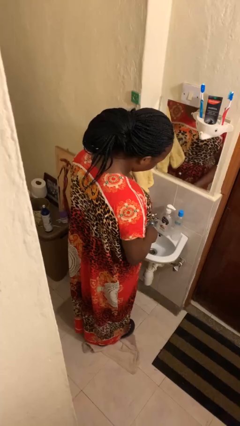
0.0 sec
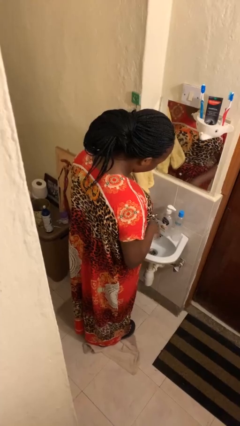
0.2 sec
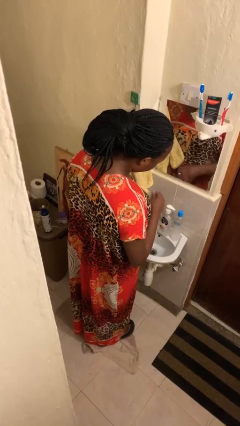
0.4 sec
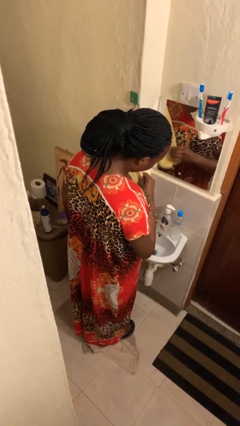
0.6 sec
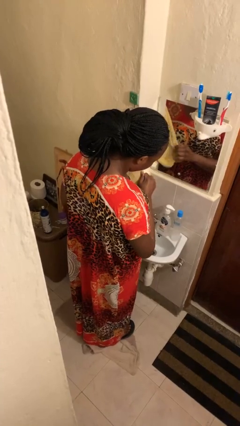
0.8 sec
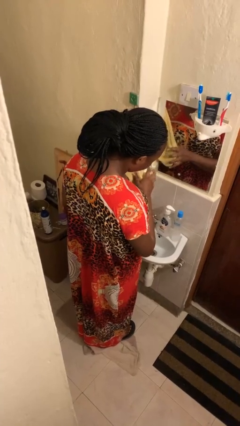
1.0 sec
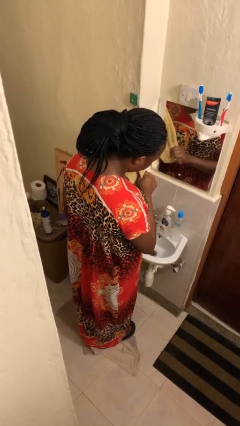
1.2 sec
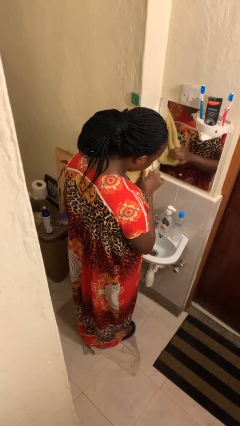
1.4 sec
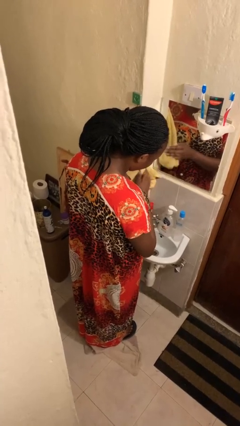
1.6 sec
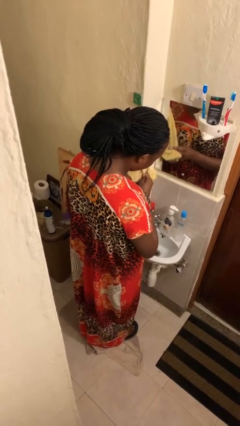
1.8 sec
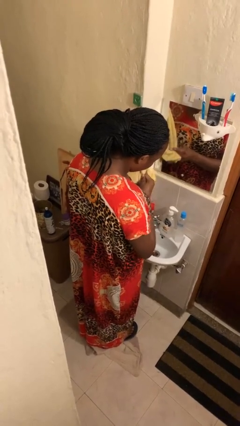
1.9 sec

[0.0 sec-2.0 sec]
person dries hands with towel

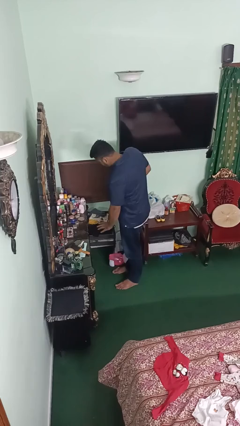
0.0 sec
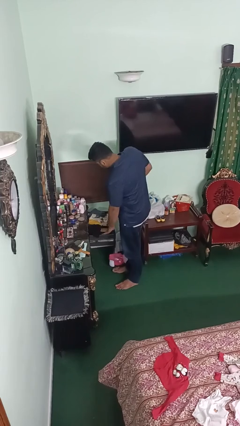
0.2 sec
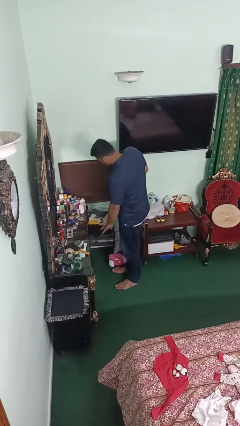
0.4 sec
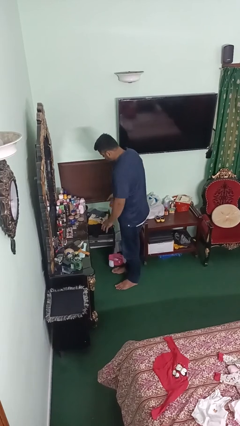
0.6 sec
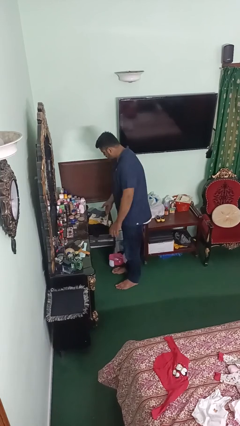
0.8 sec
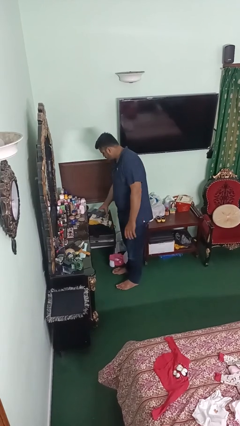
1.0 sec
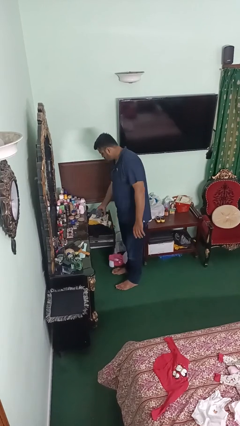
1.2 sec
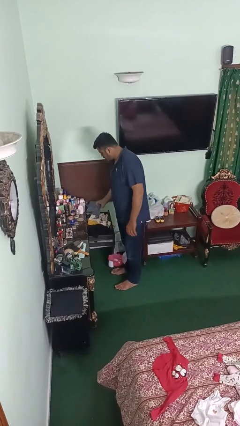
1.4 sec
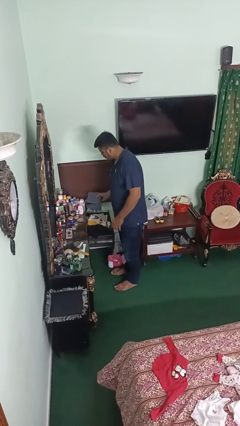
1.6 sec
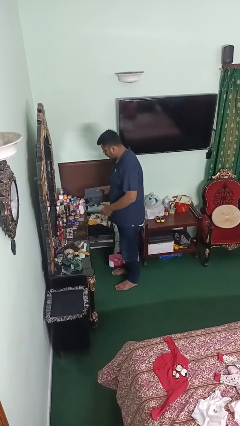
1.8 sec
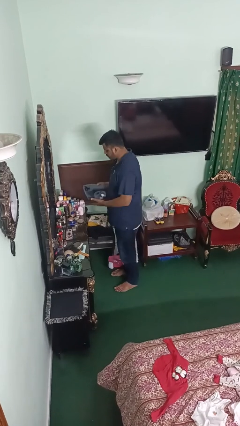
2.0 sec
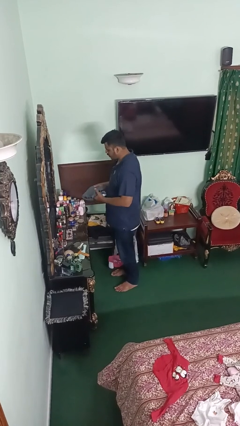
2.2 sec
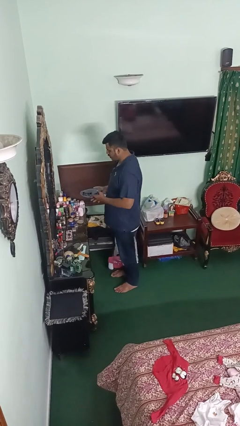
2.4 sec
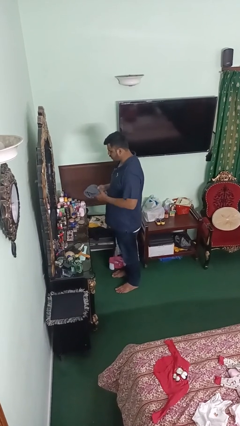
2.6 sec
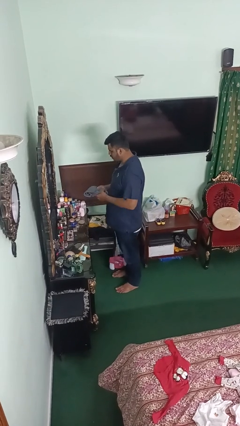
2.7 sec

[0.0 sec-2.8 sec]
person puts clothes into dresser

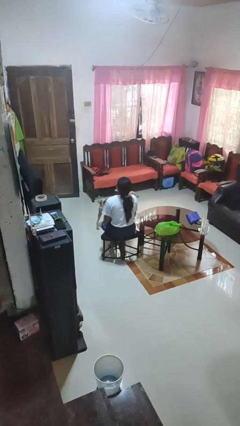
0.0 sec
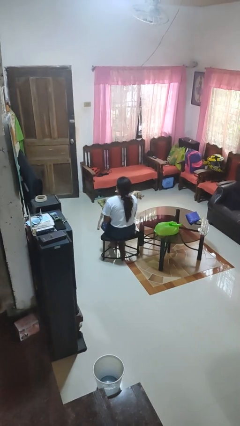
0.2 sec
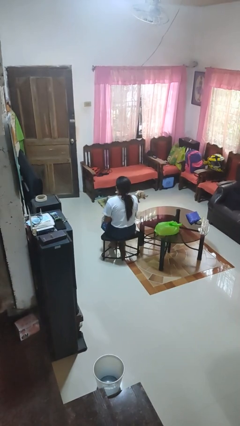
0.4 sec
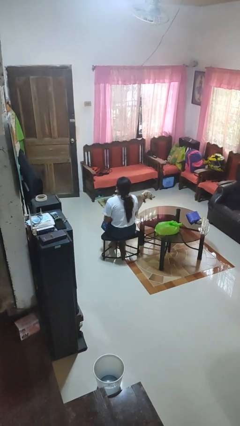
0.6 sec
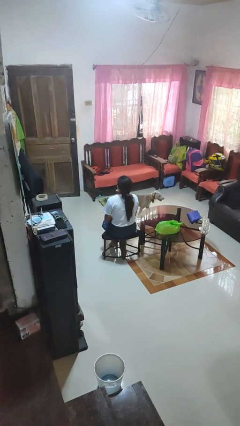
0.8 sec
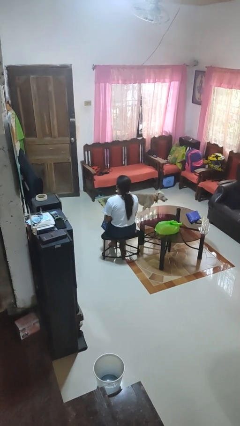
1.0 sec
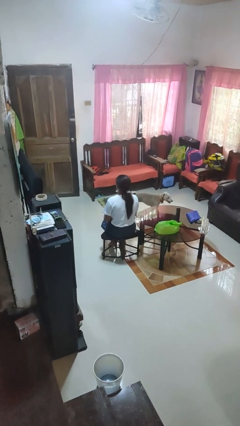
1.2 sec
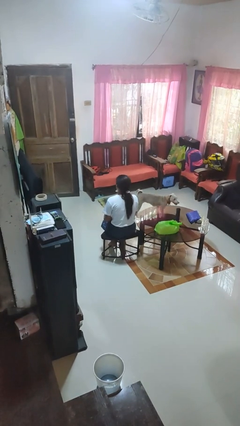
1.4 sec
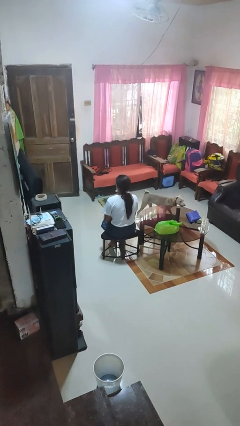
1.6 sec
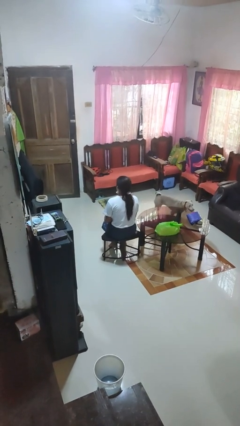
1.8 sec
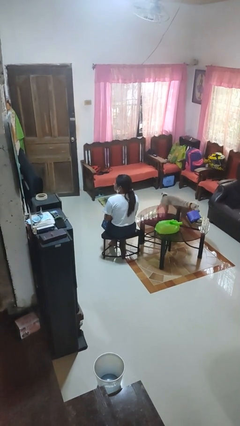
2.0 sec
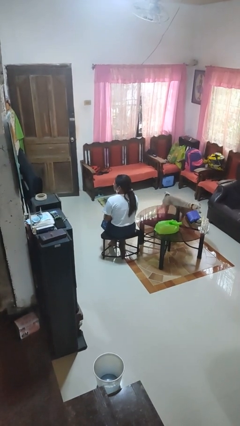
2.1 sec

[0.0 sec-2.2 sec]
person nods head

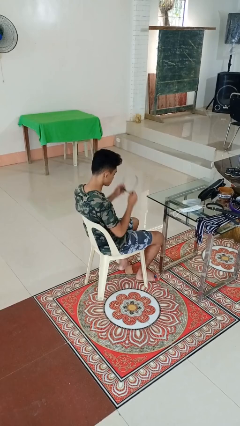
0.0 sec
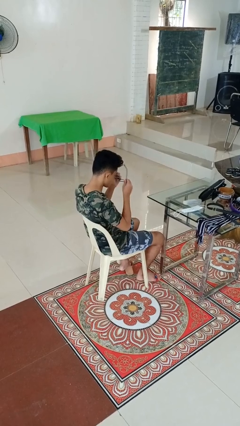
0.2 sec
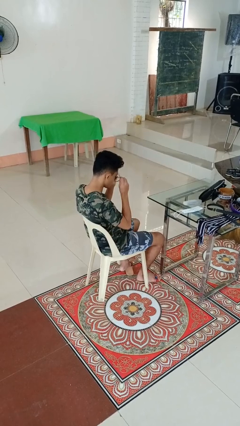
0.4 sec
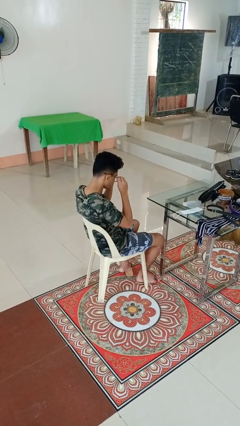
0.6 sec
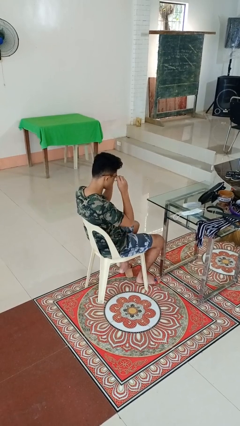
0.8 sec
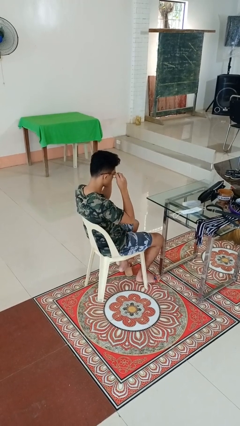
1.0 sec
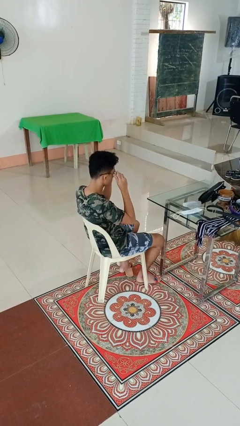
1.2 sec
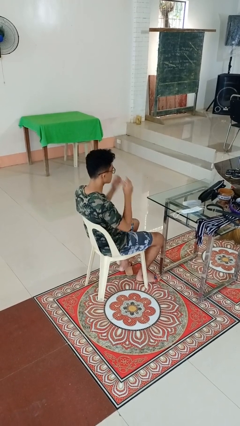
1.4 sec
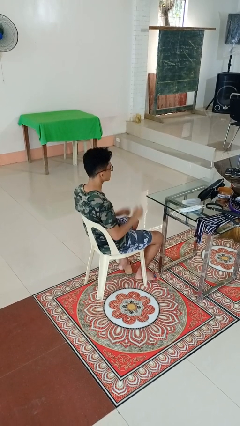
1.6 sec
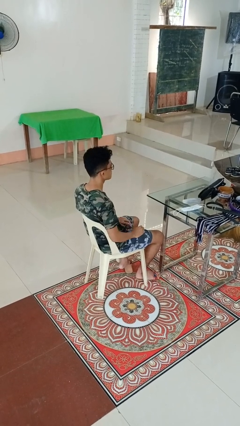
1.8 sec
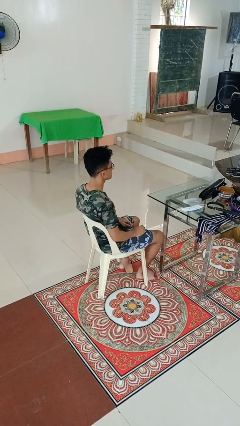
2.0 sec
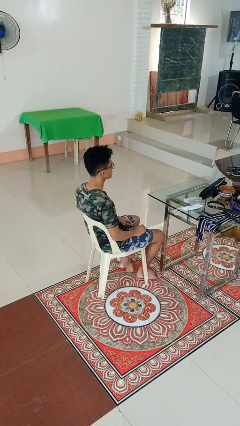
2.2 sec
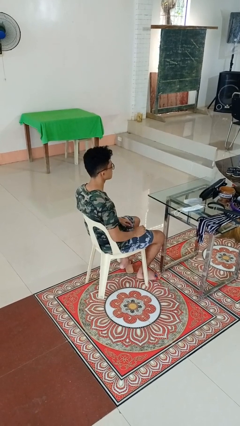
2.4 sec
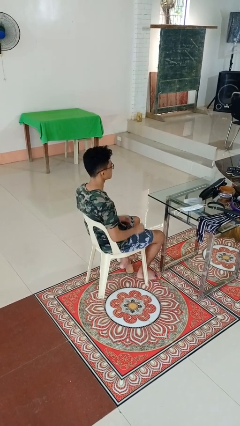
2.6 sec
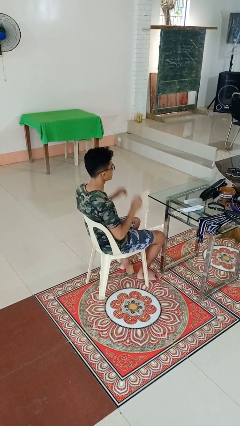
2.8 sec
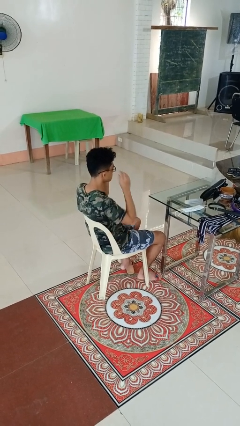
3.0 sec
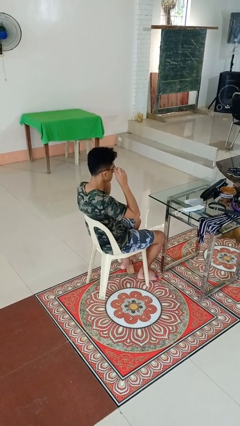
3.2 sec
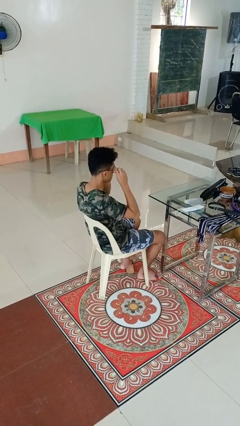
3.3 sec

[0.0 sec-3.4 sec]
person puts on glasses

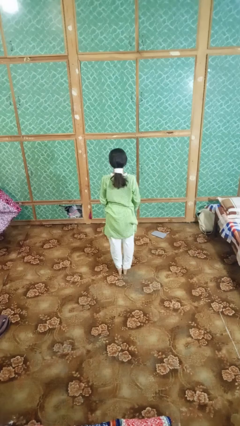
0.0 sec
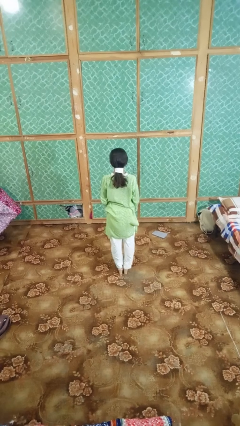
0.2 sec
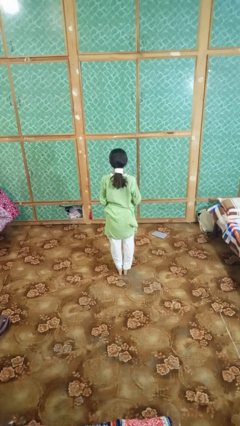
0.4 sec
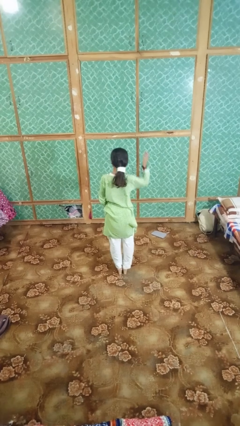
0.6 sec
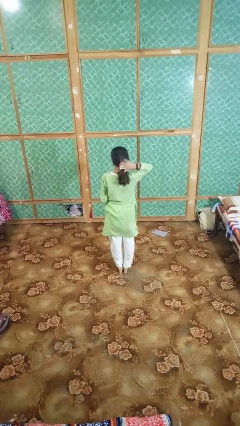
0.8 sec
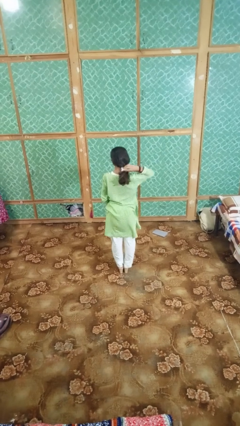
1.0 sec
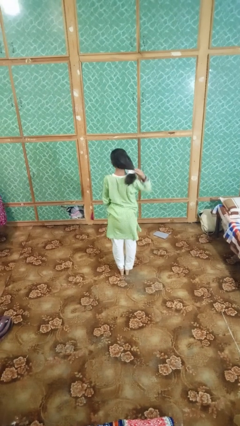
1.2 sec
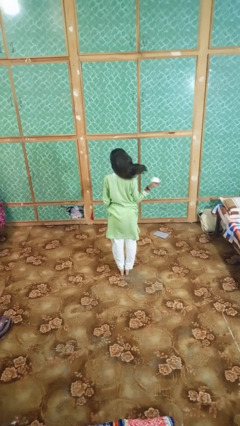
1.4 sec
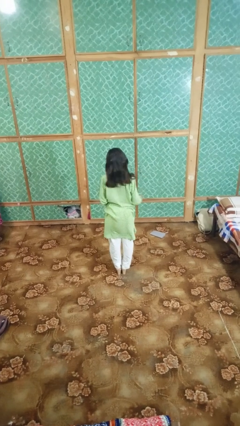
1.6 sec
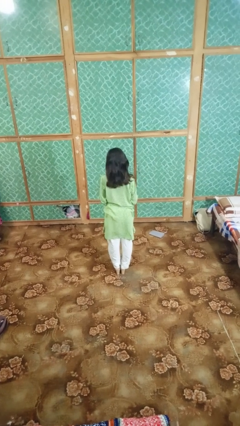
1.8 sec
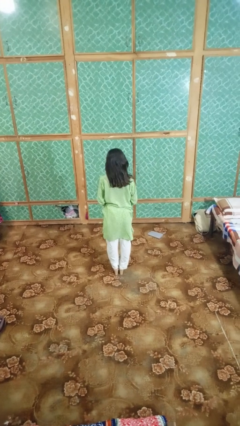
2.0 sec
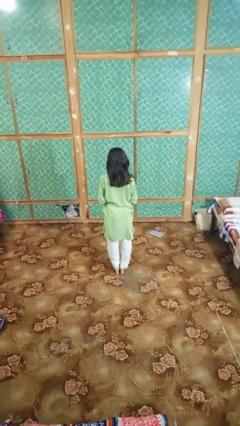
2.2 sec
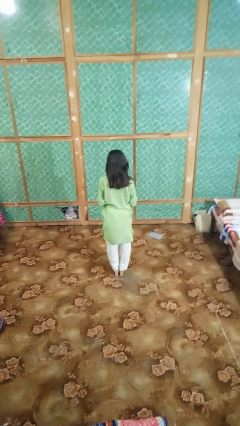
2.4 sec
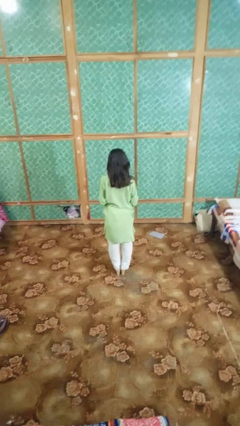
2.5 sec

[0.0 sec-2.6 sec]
person takes off hairtie

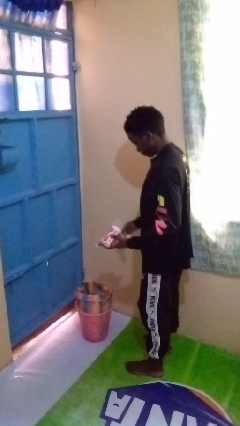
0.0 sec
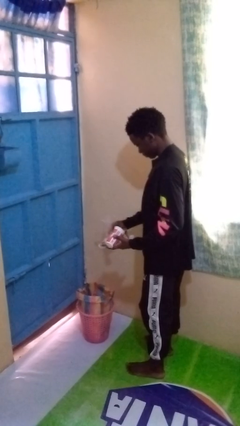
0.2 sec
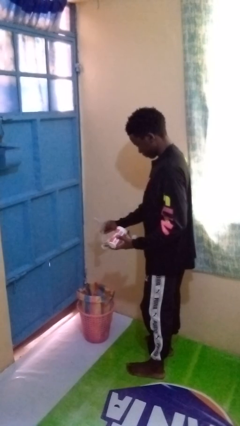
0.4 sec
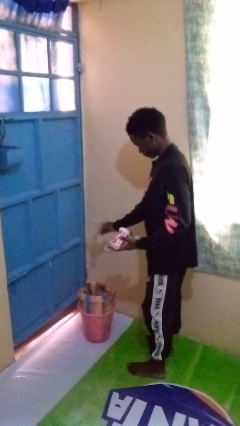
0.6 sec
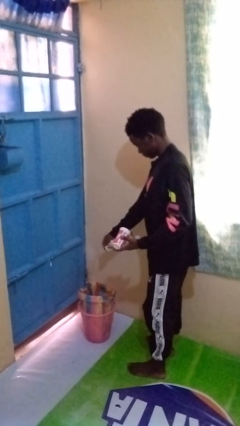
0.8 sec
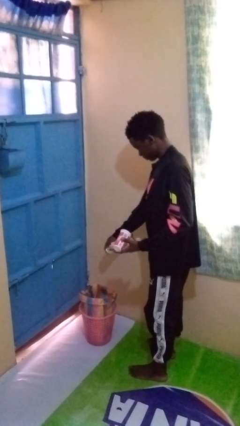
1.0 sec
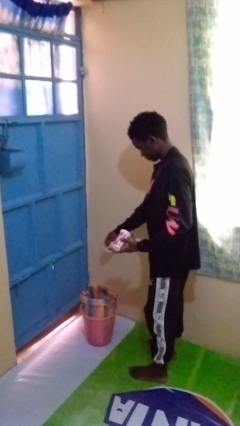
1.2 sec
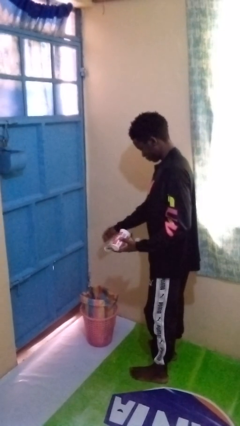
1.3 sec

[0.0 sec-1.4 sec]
person discards trash

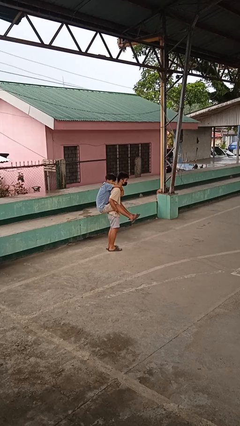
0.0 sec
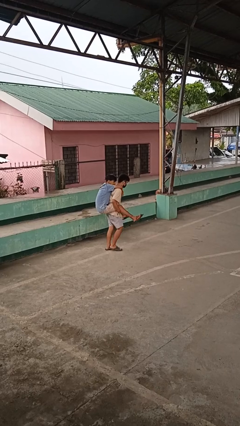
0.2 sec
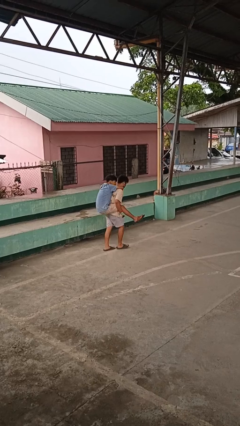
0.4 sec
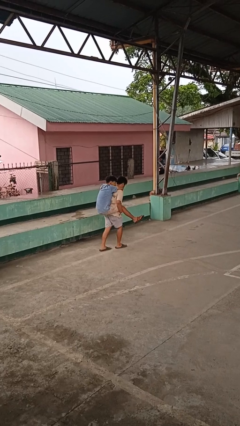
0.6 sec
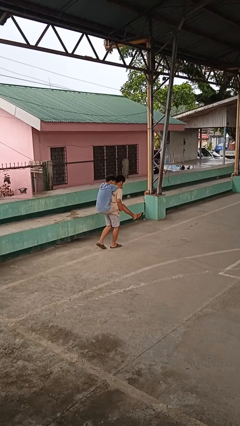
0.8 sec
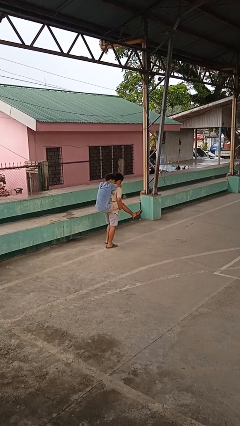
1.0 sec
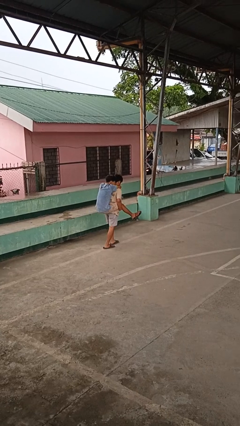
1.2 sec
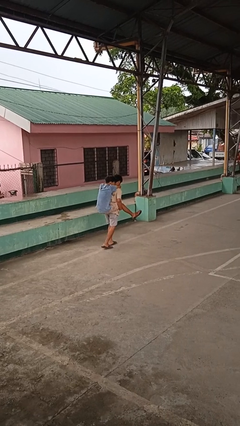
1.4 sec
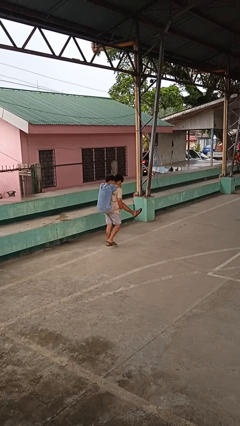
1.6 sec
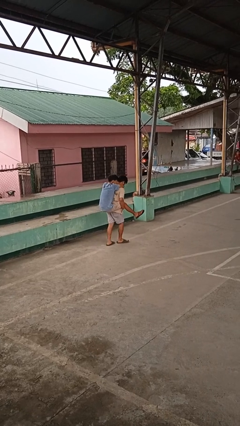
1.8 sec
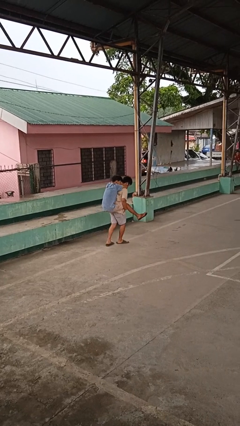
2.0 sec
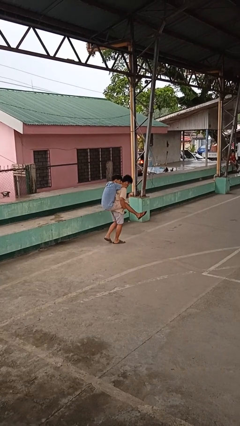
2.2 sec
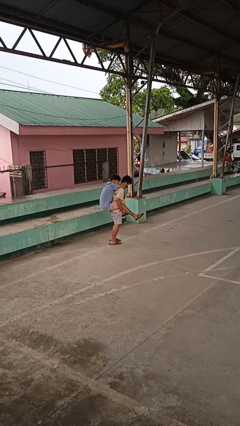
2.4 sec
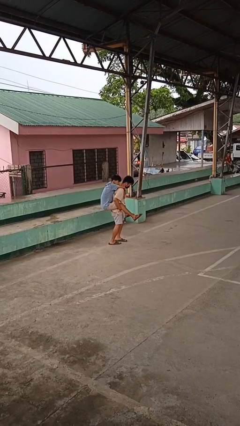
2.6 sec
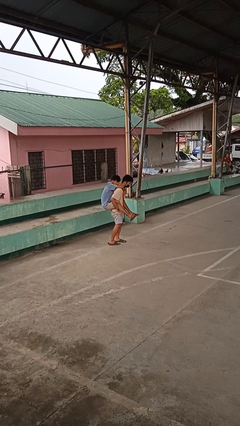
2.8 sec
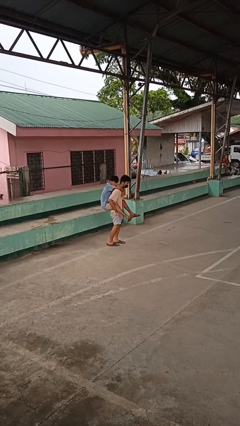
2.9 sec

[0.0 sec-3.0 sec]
person carries person on back
